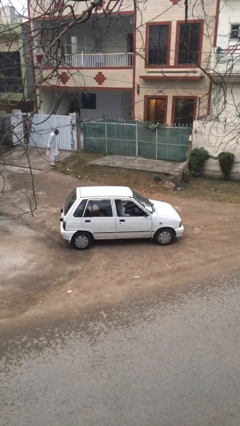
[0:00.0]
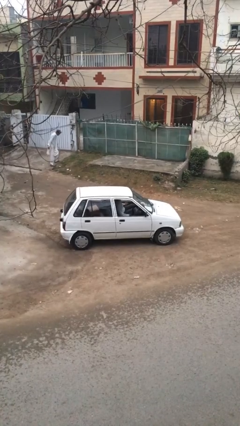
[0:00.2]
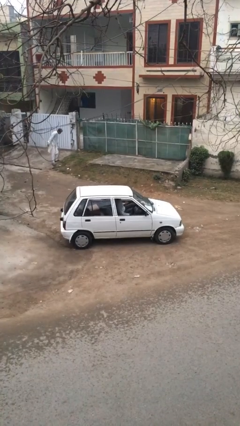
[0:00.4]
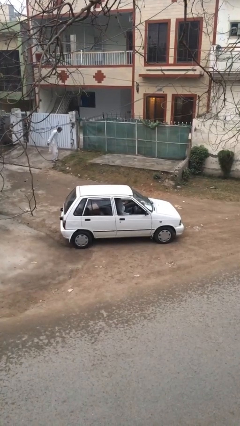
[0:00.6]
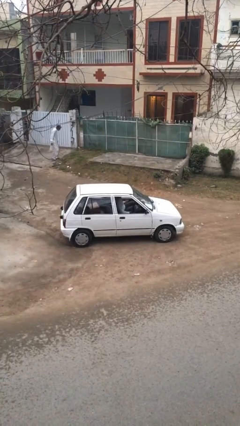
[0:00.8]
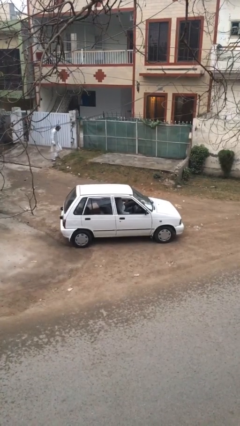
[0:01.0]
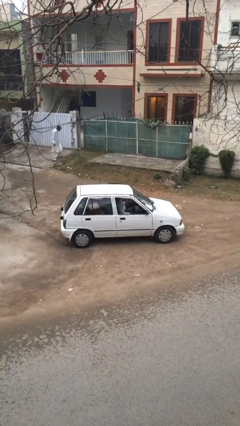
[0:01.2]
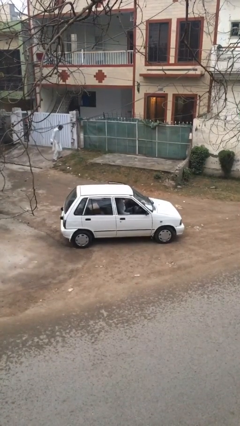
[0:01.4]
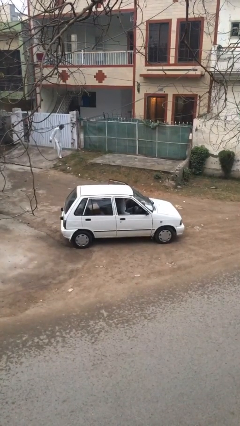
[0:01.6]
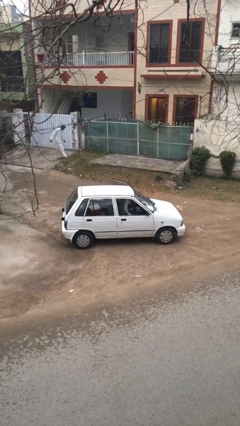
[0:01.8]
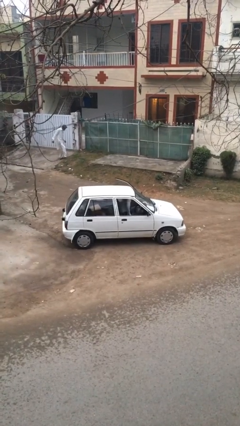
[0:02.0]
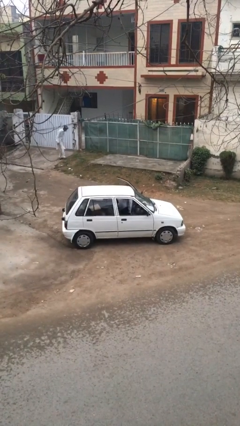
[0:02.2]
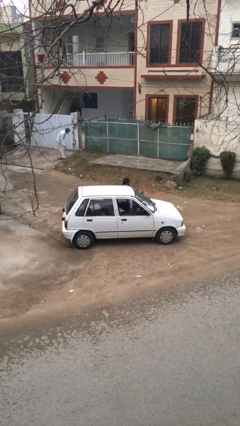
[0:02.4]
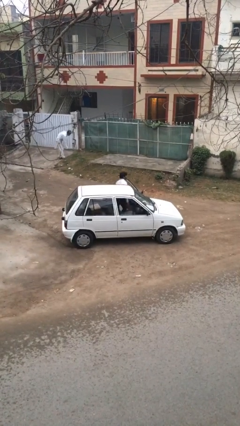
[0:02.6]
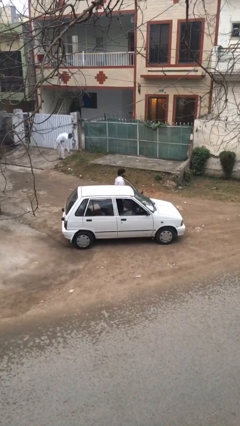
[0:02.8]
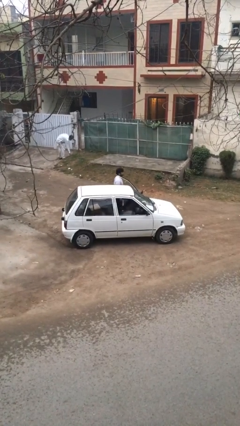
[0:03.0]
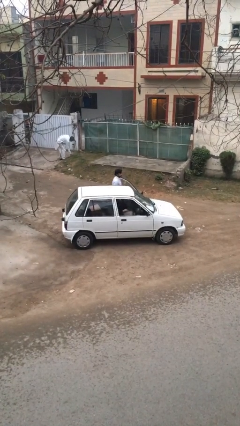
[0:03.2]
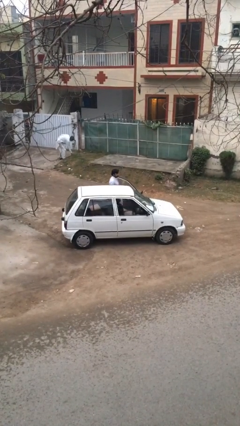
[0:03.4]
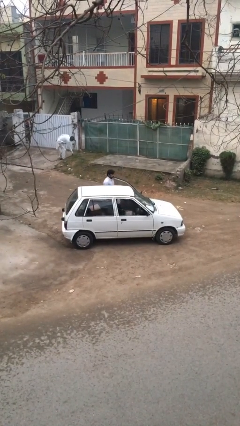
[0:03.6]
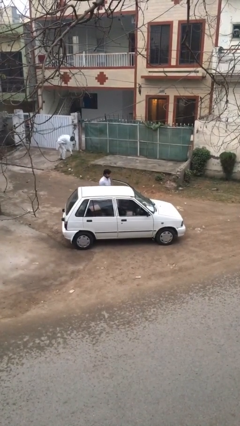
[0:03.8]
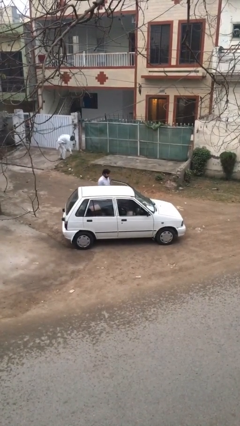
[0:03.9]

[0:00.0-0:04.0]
car drops off person

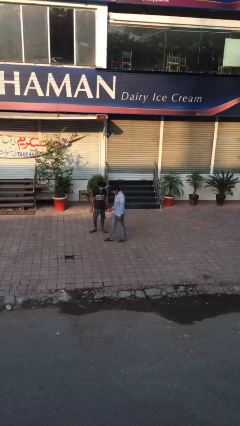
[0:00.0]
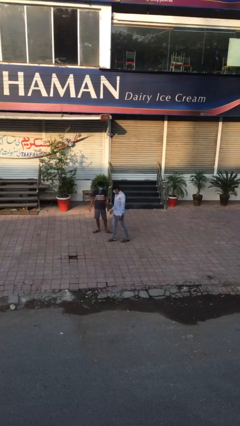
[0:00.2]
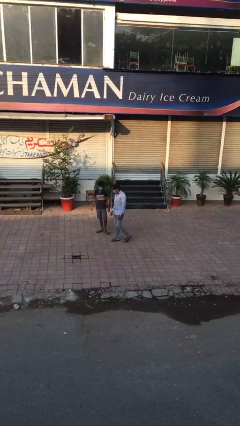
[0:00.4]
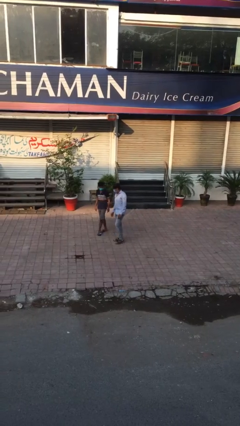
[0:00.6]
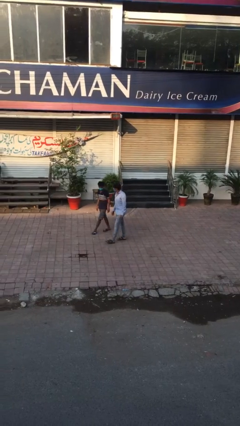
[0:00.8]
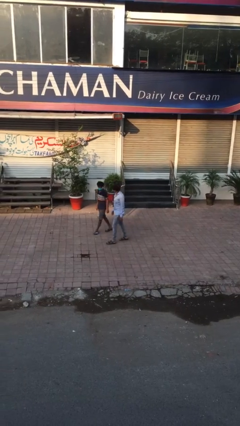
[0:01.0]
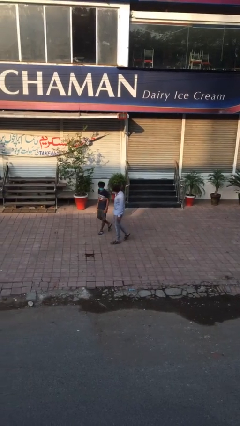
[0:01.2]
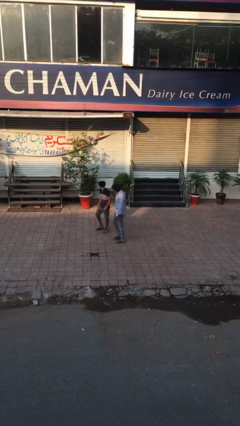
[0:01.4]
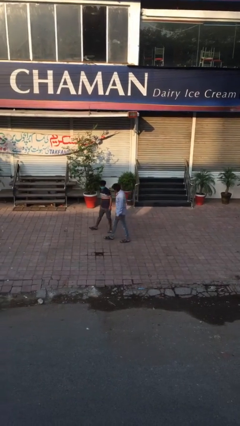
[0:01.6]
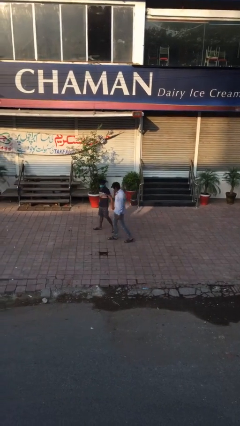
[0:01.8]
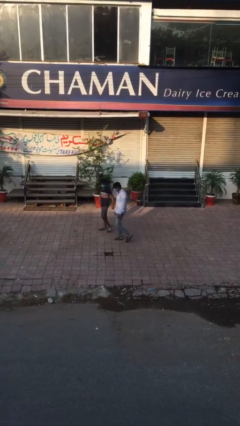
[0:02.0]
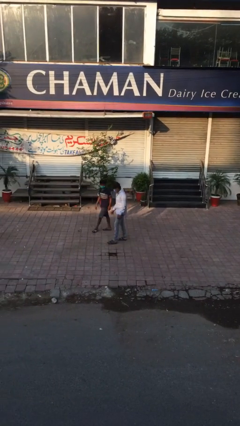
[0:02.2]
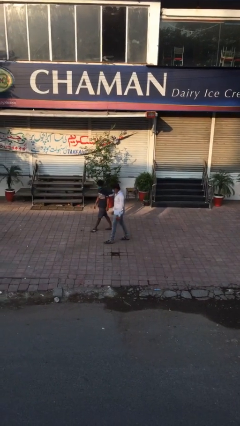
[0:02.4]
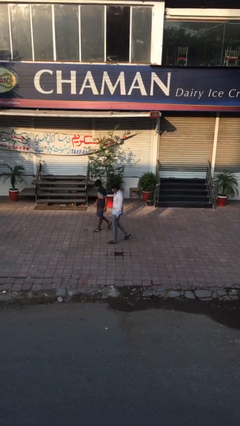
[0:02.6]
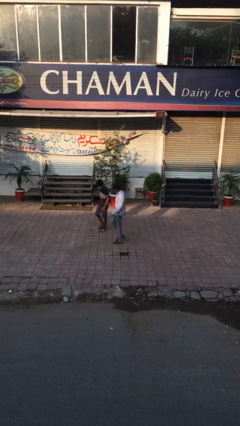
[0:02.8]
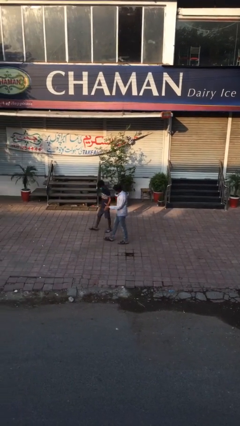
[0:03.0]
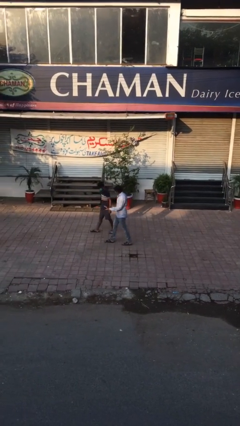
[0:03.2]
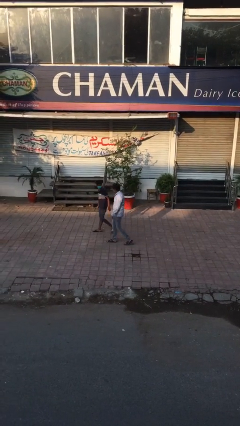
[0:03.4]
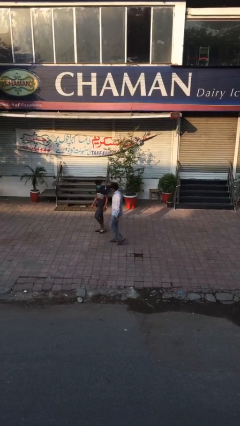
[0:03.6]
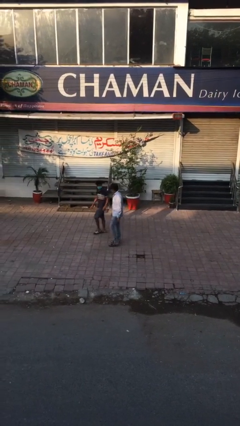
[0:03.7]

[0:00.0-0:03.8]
person talks to person

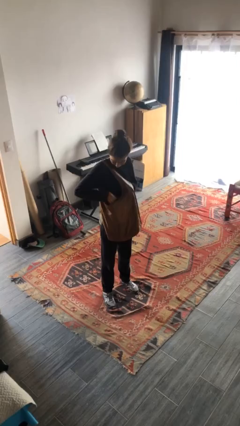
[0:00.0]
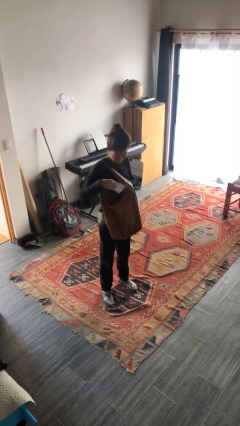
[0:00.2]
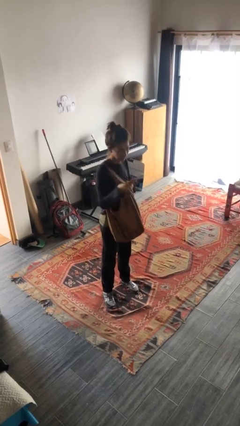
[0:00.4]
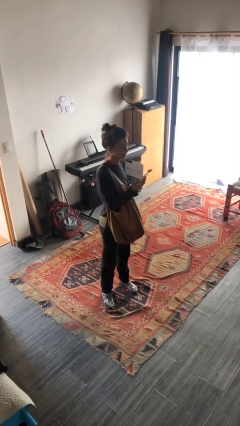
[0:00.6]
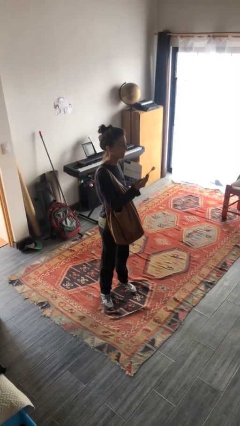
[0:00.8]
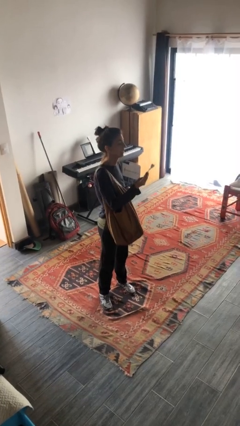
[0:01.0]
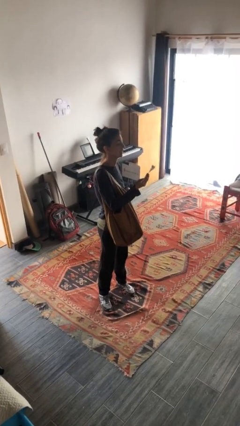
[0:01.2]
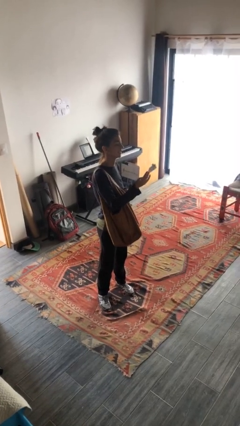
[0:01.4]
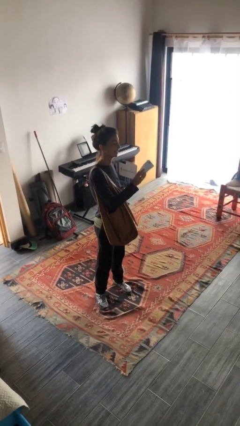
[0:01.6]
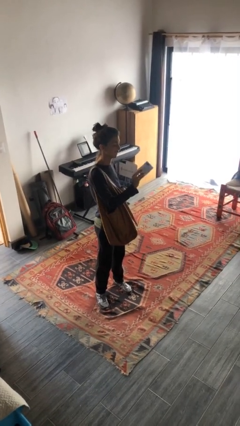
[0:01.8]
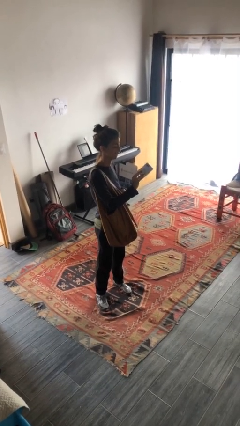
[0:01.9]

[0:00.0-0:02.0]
person takes object from purse

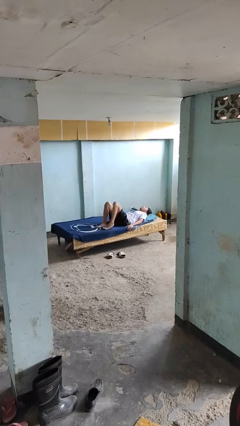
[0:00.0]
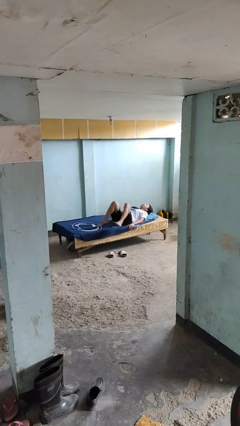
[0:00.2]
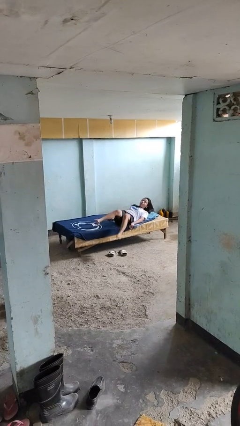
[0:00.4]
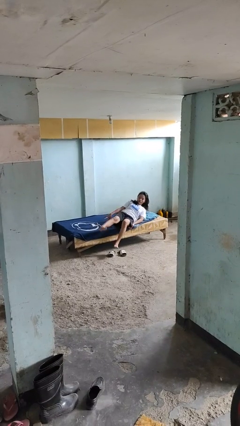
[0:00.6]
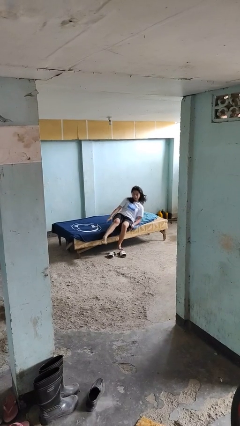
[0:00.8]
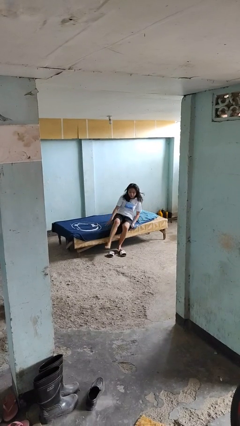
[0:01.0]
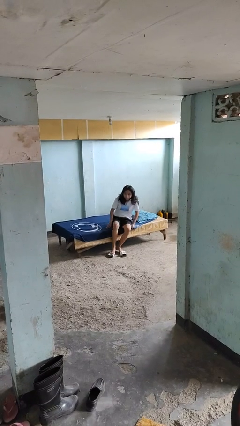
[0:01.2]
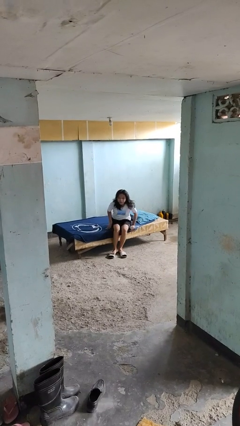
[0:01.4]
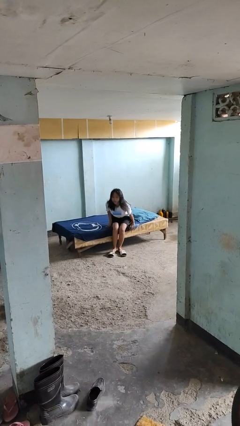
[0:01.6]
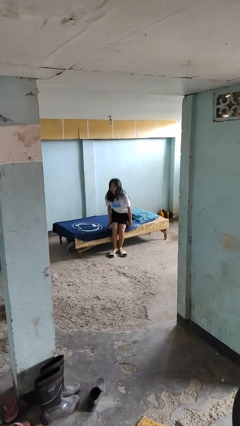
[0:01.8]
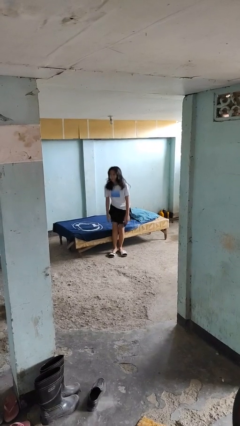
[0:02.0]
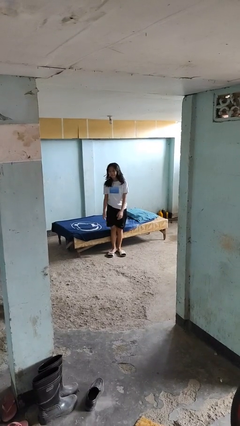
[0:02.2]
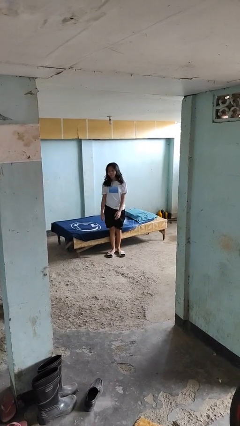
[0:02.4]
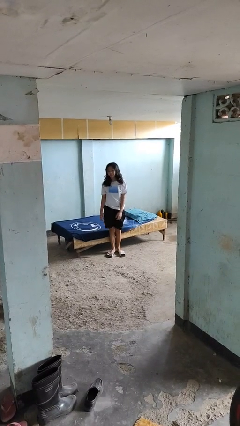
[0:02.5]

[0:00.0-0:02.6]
person stands up

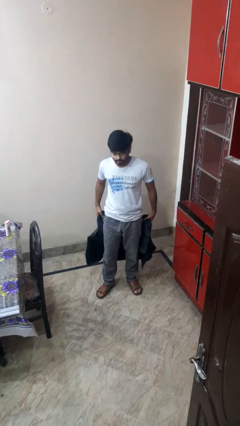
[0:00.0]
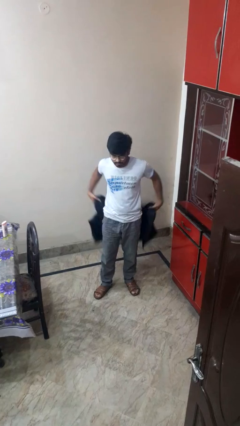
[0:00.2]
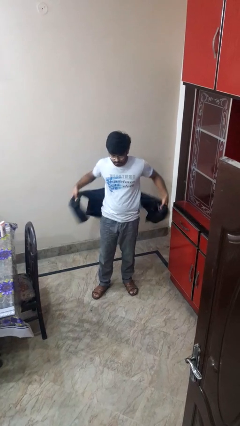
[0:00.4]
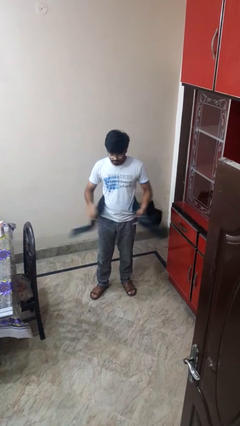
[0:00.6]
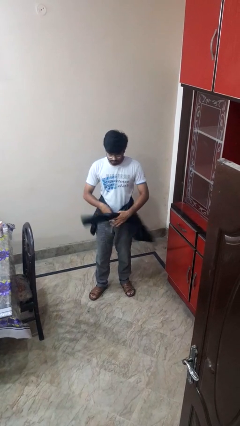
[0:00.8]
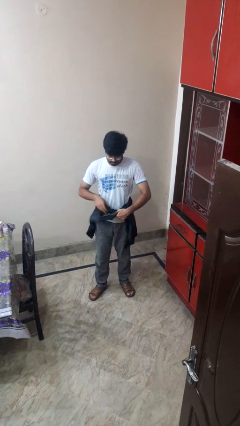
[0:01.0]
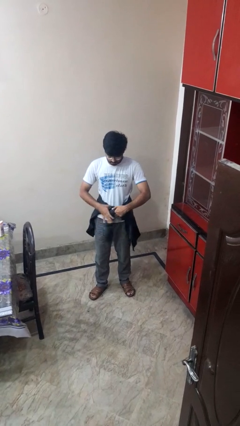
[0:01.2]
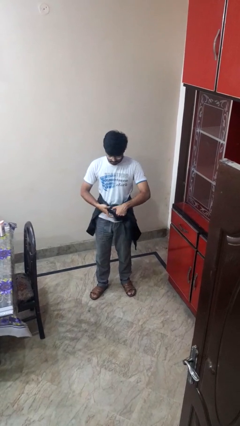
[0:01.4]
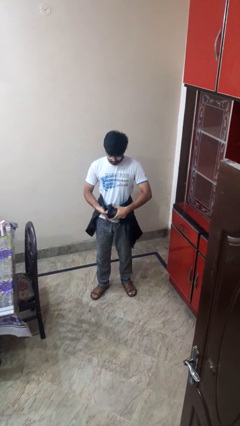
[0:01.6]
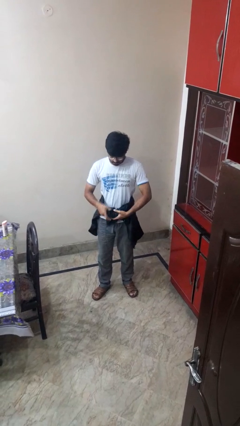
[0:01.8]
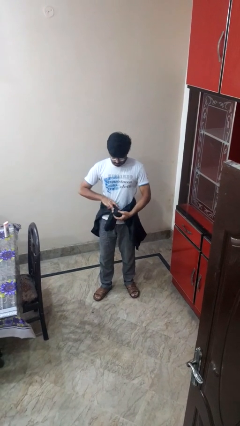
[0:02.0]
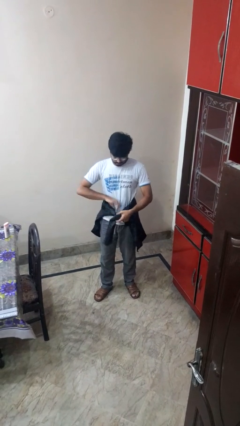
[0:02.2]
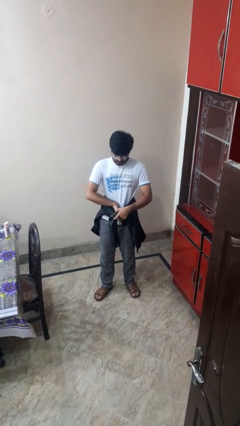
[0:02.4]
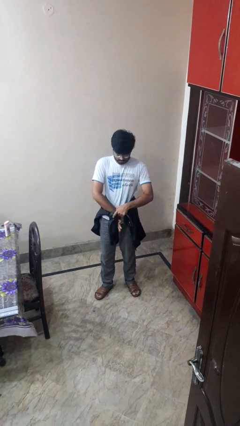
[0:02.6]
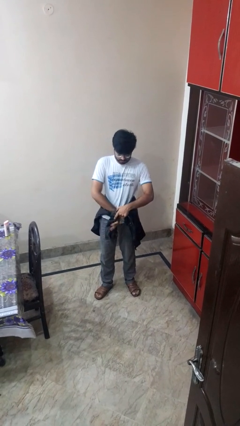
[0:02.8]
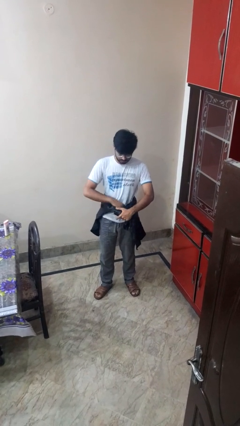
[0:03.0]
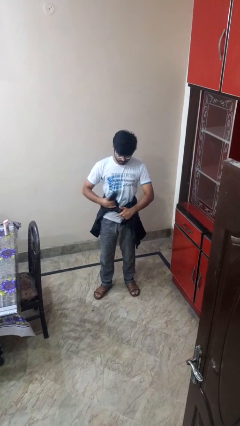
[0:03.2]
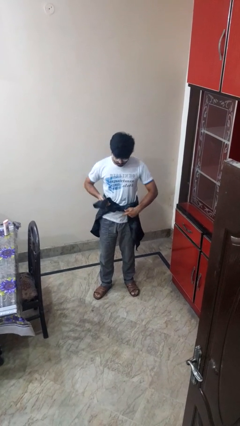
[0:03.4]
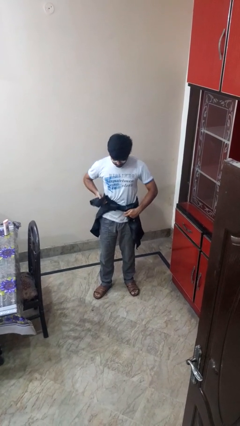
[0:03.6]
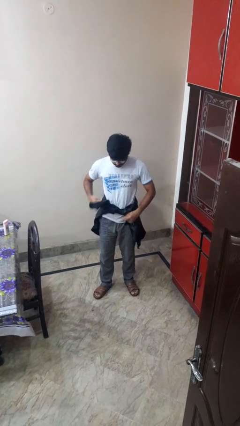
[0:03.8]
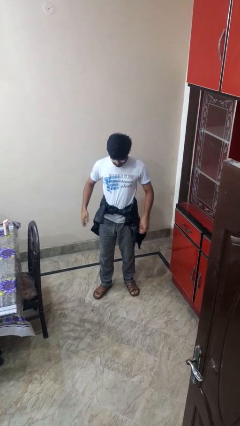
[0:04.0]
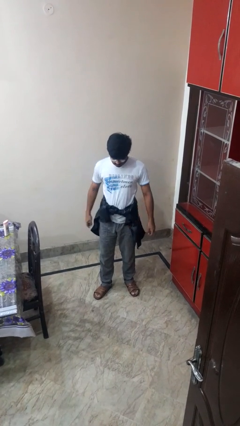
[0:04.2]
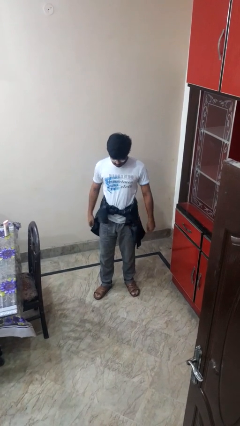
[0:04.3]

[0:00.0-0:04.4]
person ties jacket around waist

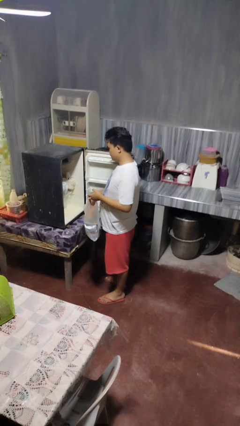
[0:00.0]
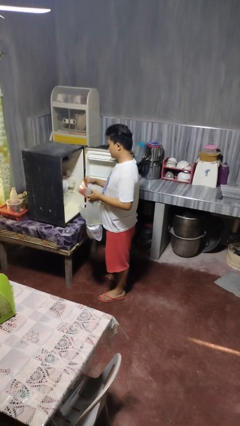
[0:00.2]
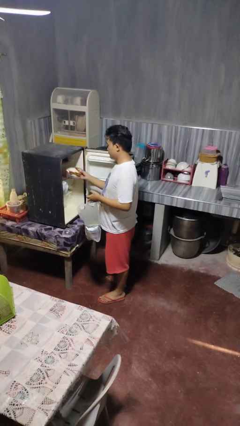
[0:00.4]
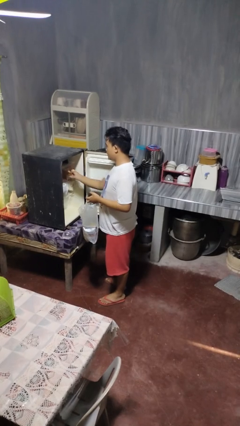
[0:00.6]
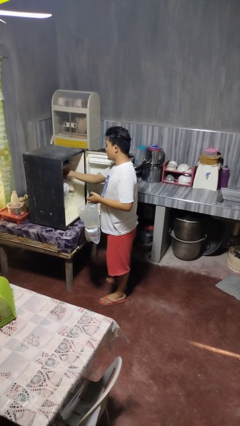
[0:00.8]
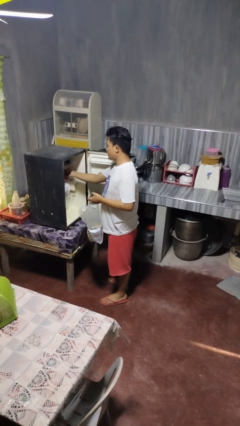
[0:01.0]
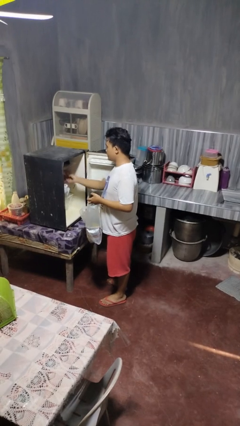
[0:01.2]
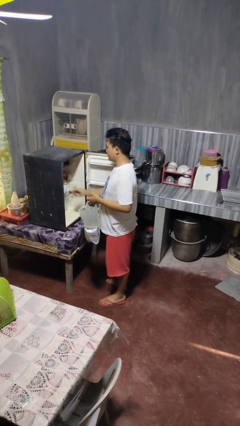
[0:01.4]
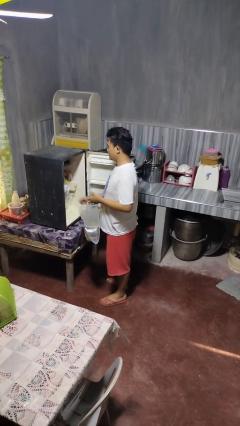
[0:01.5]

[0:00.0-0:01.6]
person loads groceries into refrigerator
